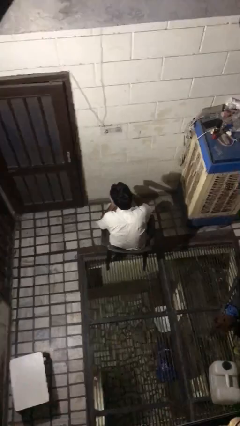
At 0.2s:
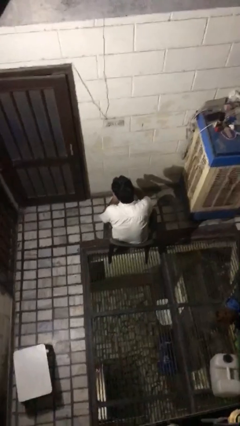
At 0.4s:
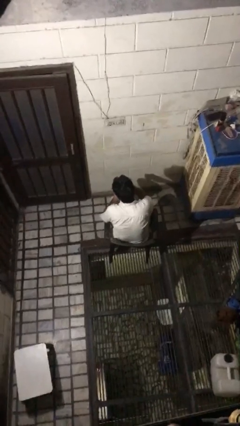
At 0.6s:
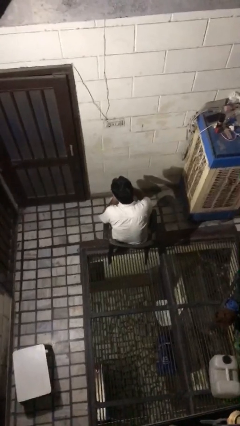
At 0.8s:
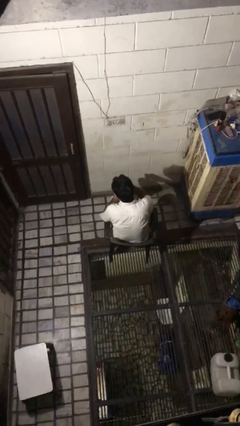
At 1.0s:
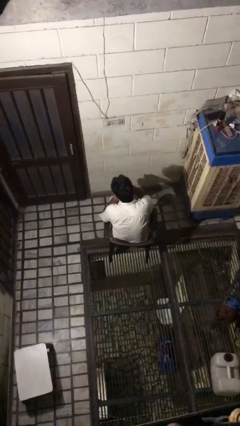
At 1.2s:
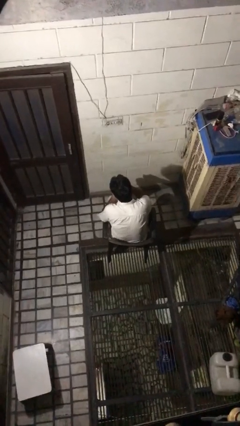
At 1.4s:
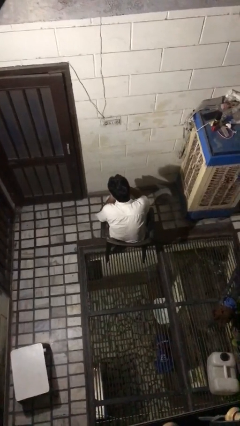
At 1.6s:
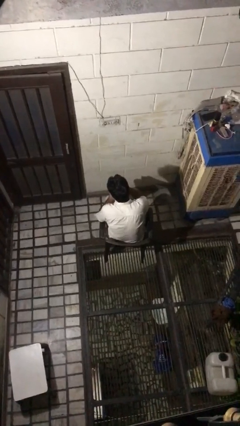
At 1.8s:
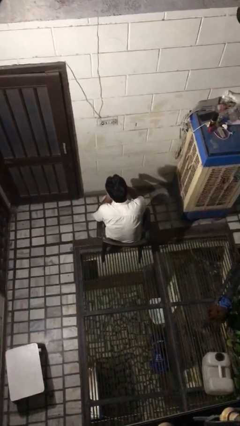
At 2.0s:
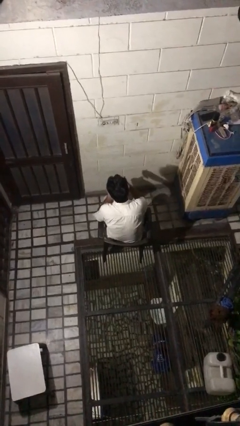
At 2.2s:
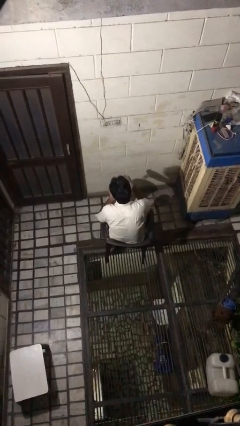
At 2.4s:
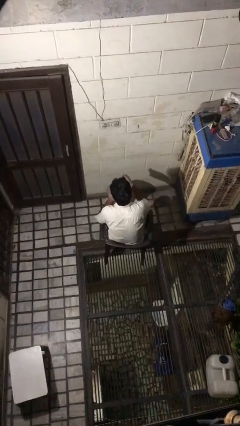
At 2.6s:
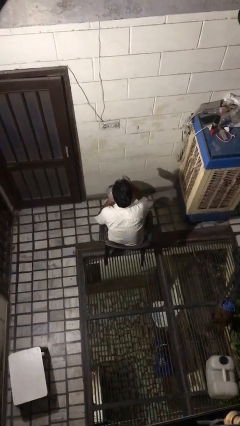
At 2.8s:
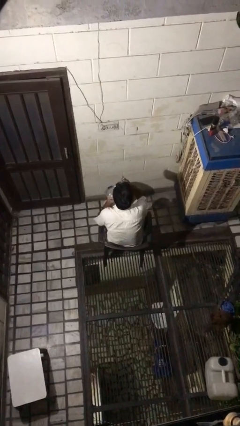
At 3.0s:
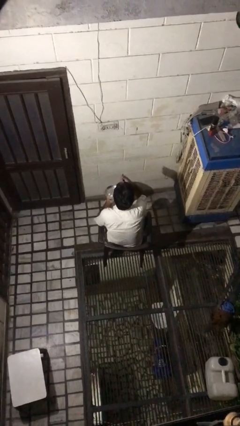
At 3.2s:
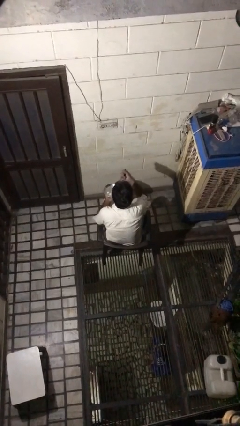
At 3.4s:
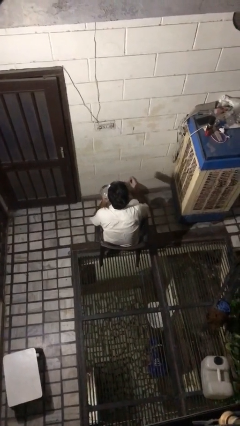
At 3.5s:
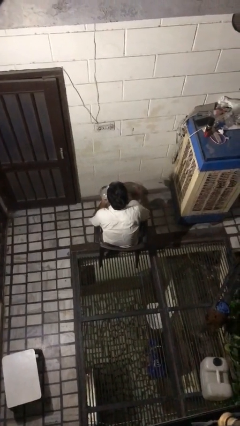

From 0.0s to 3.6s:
person eats with utensil

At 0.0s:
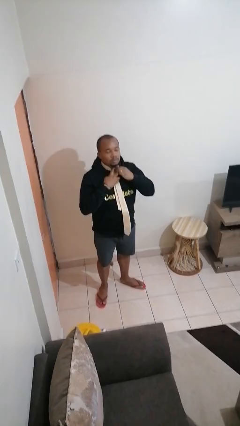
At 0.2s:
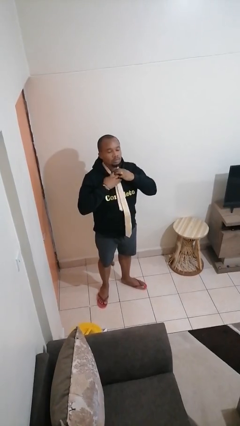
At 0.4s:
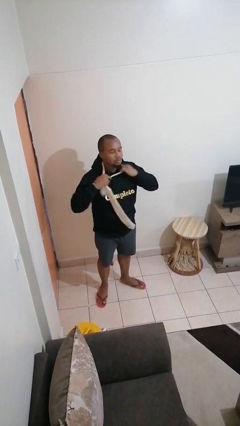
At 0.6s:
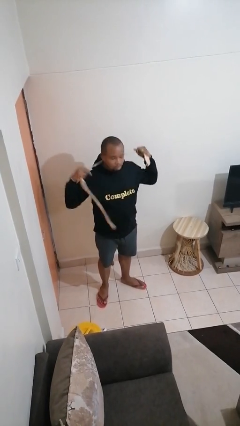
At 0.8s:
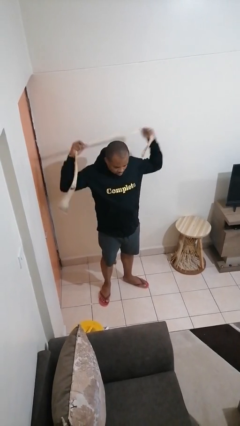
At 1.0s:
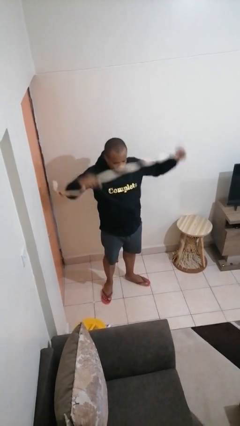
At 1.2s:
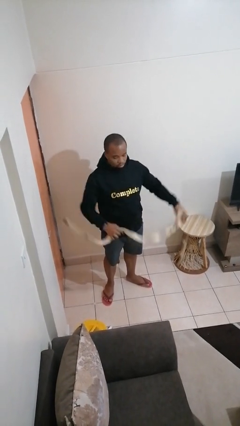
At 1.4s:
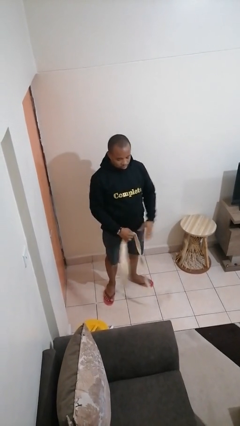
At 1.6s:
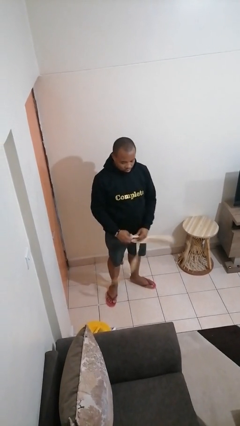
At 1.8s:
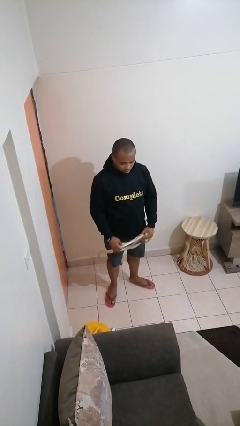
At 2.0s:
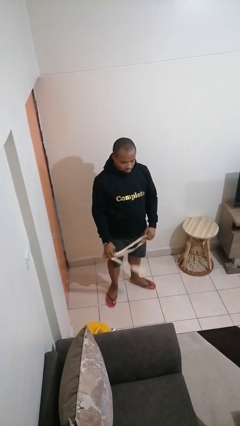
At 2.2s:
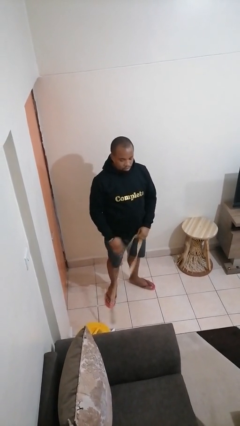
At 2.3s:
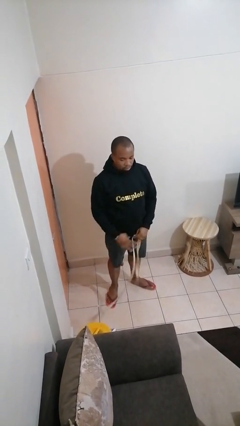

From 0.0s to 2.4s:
person takes off necktie

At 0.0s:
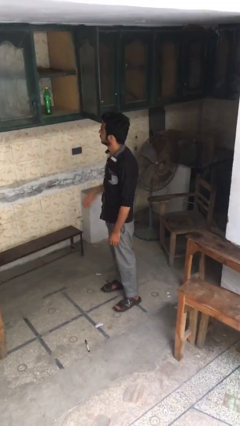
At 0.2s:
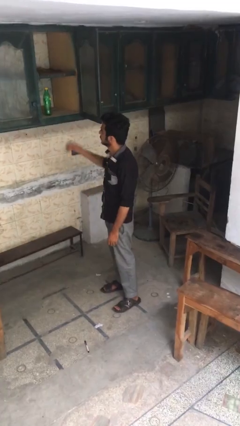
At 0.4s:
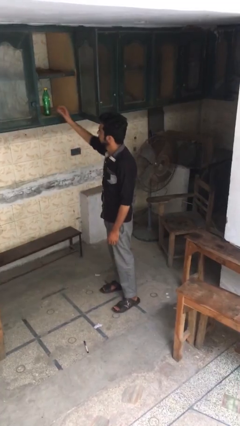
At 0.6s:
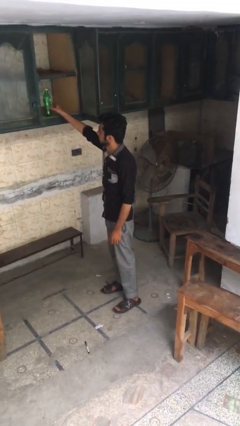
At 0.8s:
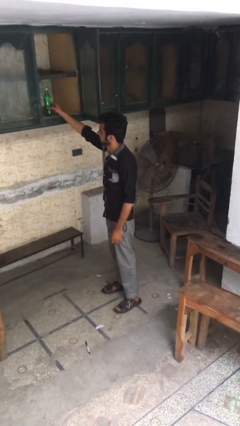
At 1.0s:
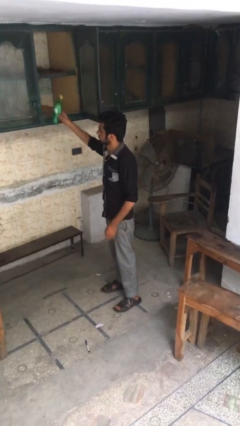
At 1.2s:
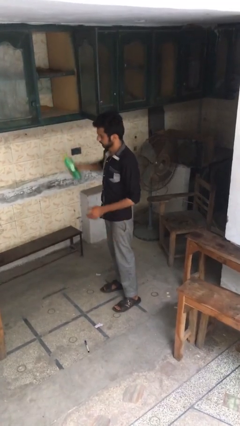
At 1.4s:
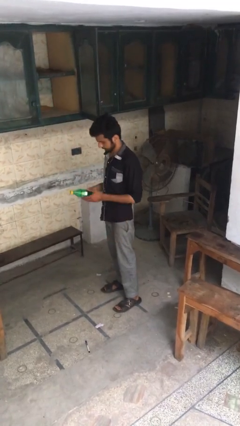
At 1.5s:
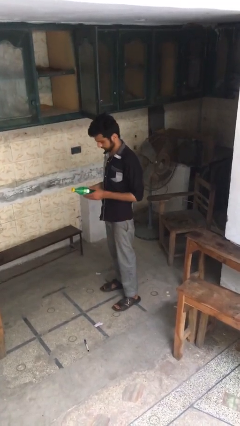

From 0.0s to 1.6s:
person takes object from cabinet

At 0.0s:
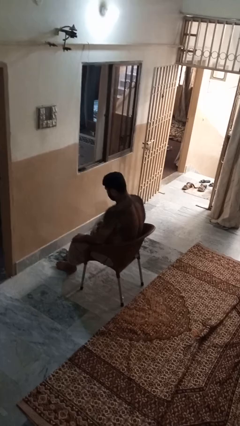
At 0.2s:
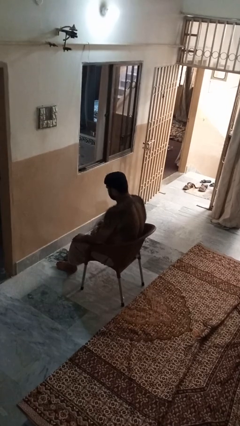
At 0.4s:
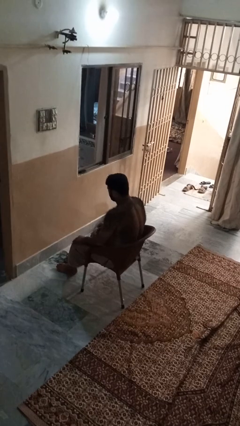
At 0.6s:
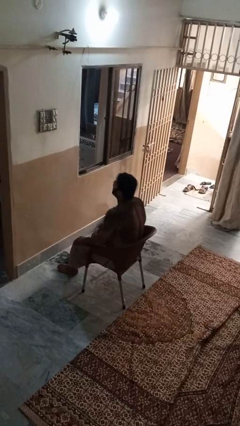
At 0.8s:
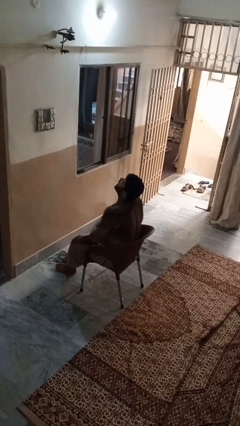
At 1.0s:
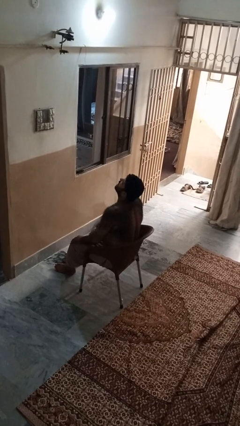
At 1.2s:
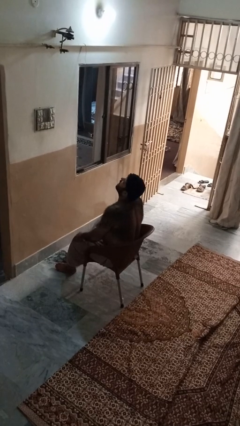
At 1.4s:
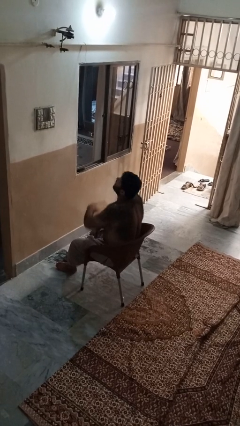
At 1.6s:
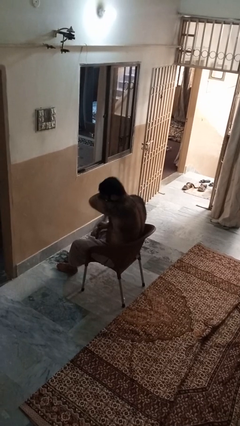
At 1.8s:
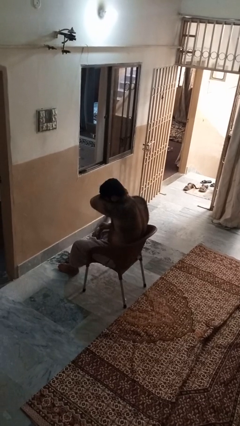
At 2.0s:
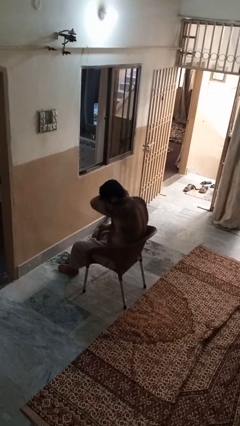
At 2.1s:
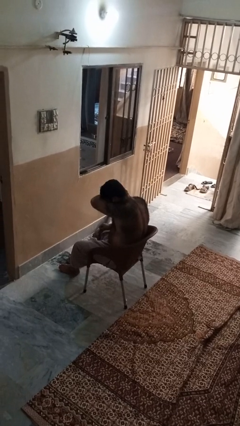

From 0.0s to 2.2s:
person sneezes into arm

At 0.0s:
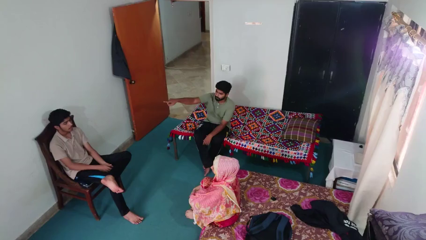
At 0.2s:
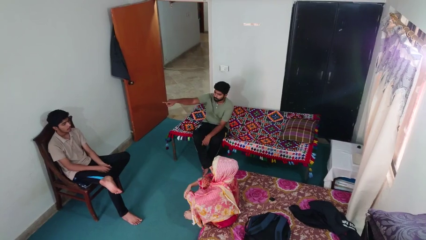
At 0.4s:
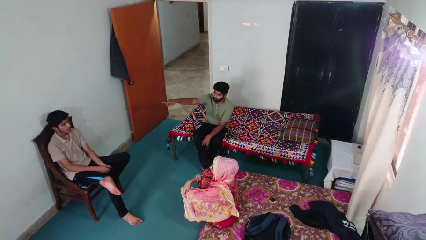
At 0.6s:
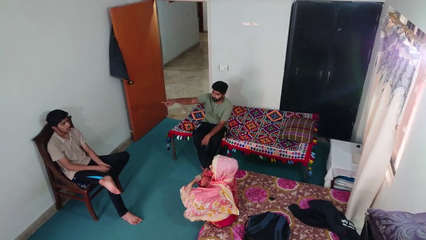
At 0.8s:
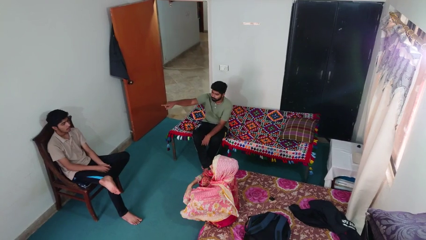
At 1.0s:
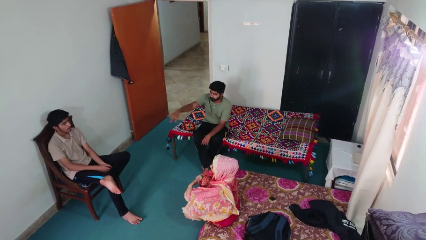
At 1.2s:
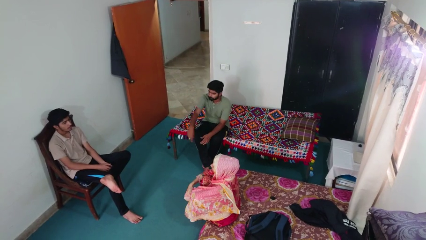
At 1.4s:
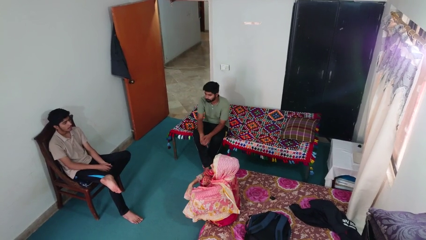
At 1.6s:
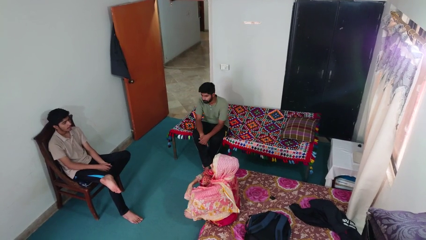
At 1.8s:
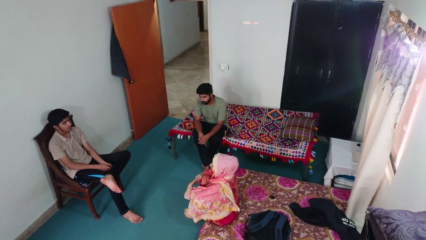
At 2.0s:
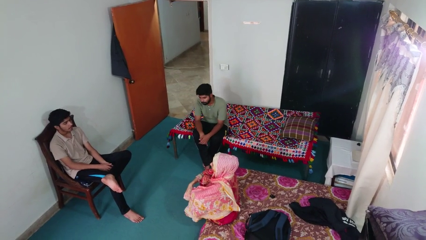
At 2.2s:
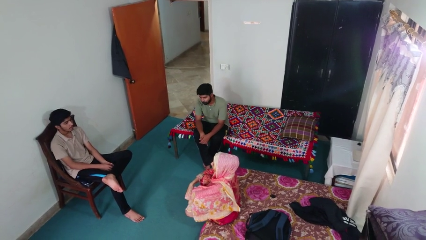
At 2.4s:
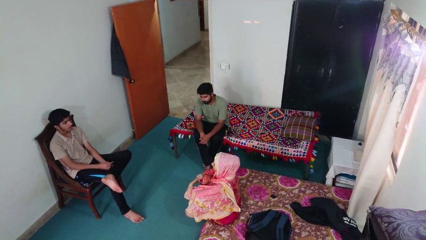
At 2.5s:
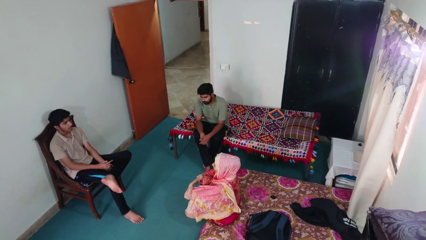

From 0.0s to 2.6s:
person points at person

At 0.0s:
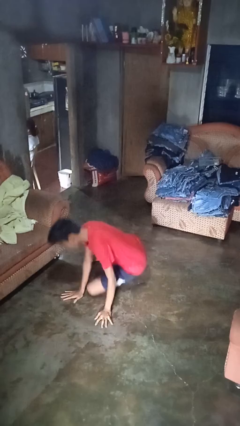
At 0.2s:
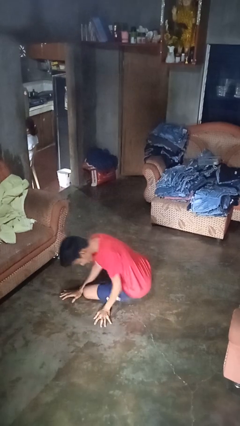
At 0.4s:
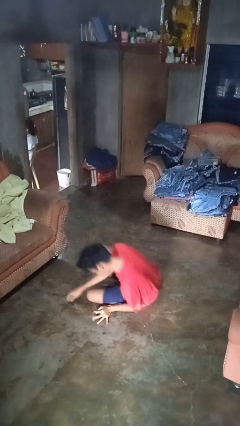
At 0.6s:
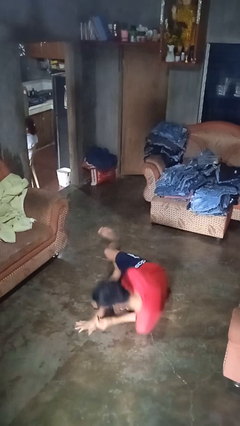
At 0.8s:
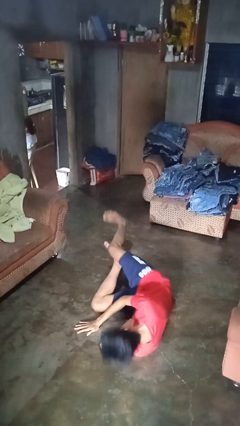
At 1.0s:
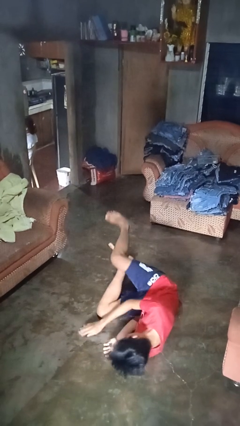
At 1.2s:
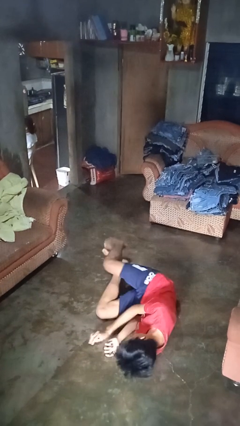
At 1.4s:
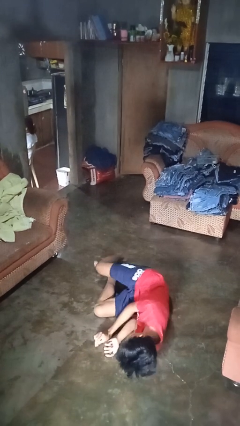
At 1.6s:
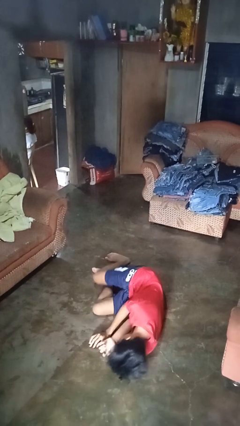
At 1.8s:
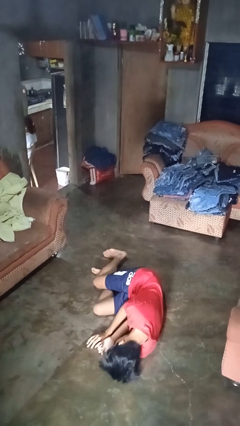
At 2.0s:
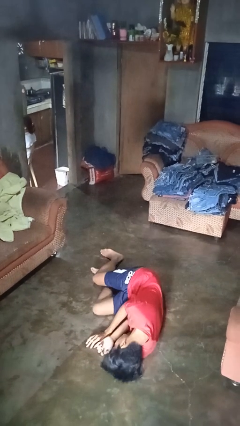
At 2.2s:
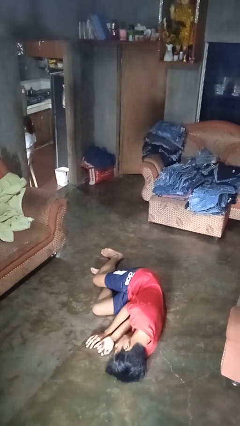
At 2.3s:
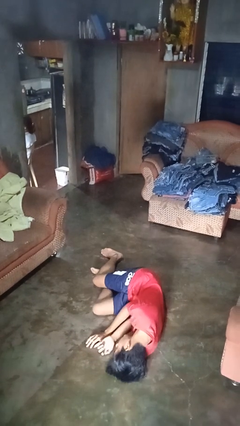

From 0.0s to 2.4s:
person falls while standing

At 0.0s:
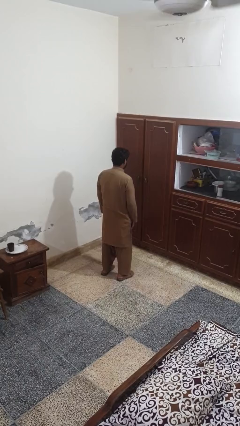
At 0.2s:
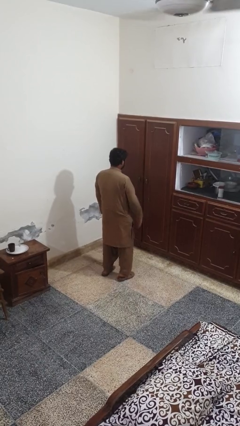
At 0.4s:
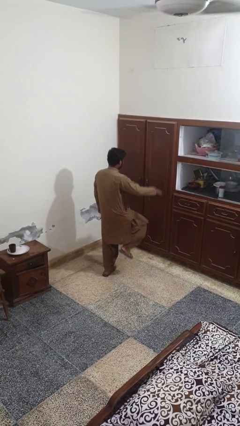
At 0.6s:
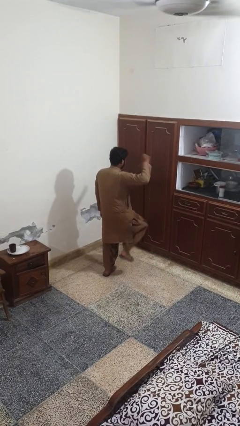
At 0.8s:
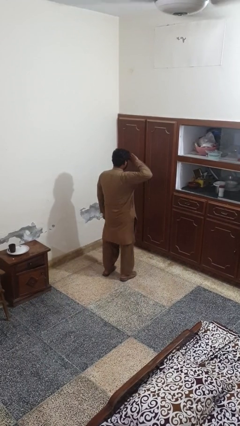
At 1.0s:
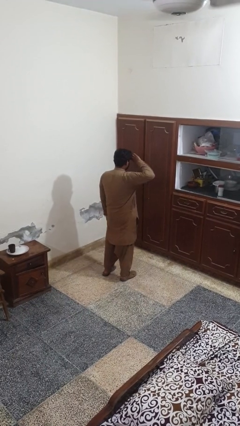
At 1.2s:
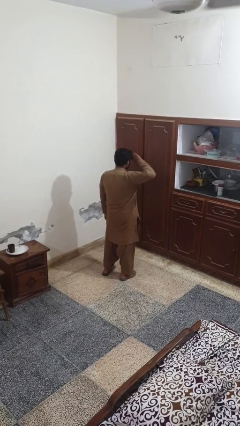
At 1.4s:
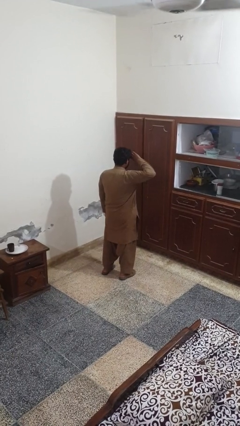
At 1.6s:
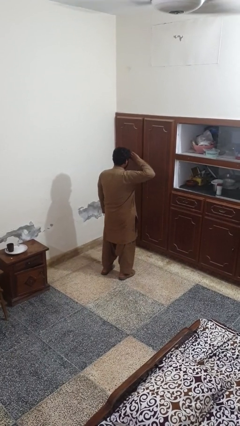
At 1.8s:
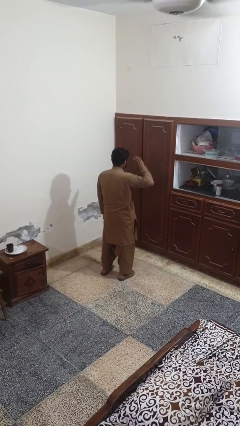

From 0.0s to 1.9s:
person salutes

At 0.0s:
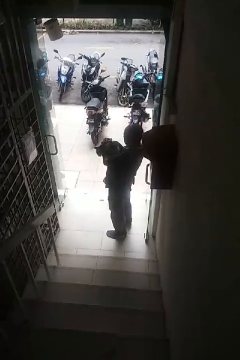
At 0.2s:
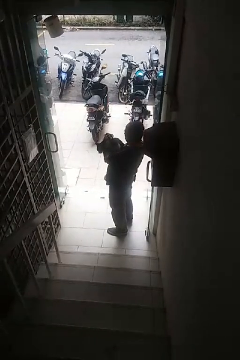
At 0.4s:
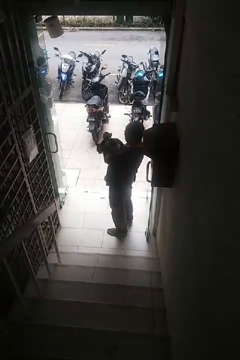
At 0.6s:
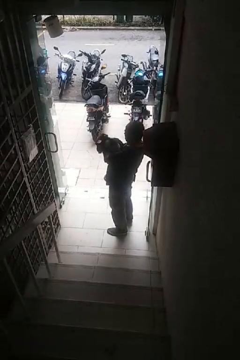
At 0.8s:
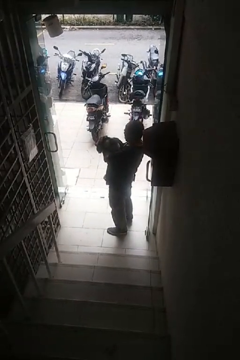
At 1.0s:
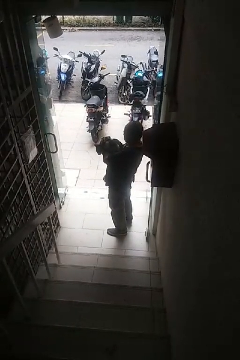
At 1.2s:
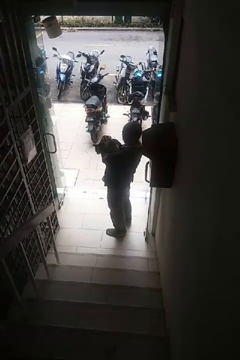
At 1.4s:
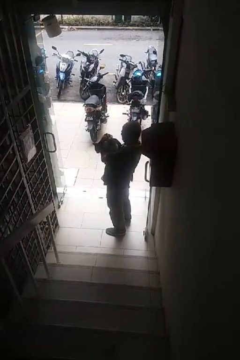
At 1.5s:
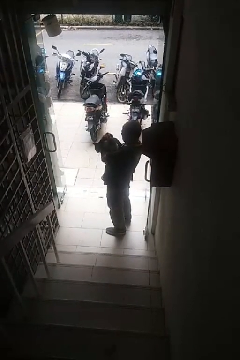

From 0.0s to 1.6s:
person hugs cat
